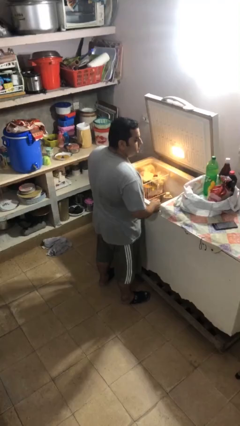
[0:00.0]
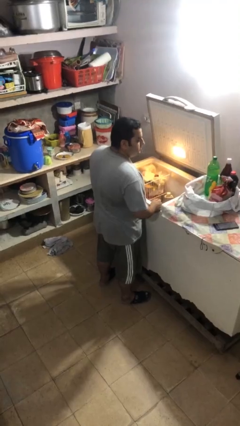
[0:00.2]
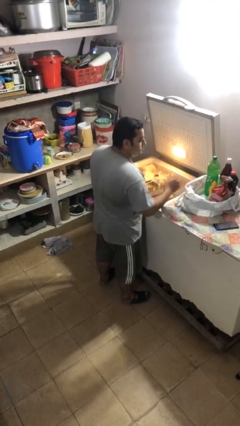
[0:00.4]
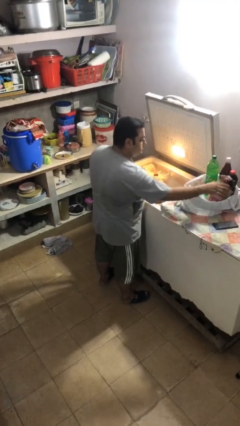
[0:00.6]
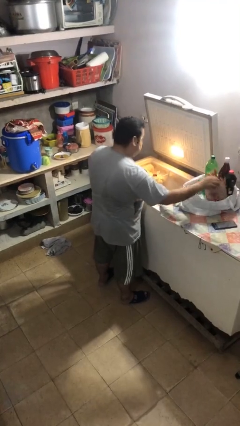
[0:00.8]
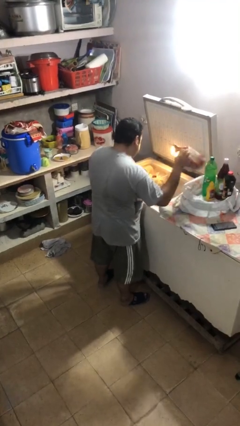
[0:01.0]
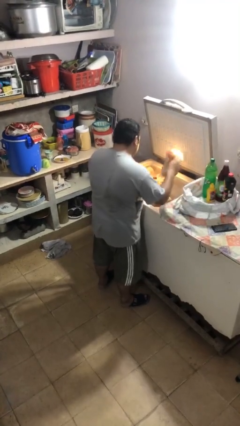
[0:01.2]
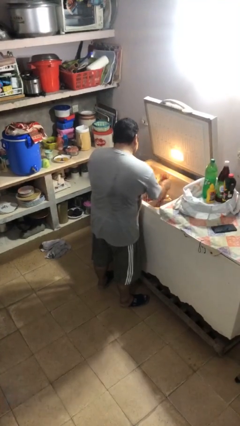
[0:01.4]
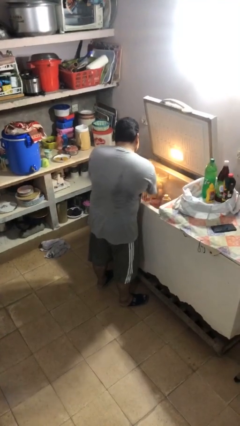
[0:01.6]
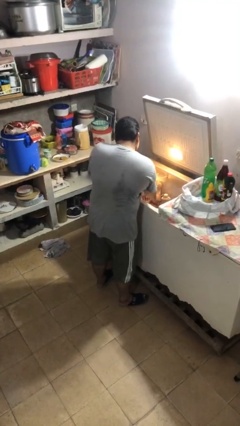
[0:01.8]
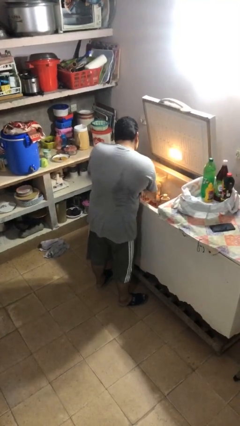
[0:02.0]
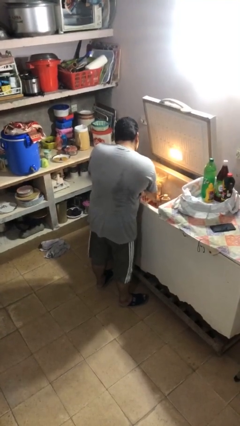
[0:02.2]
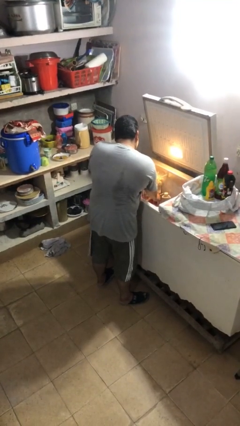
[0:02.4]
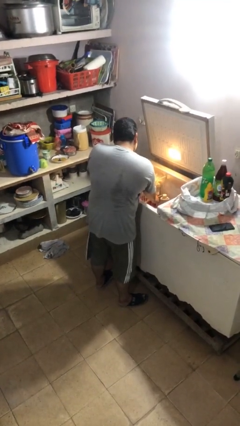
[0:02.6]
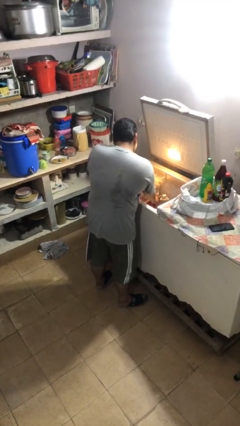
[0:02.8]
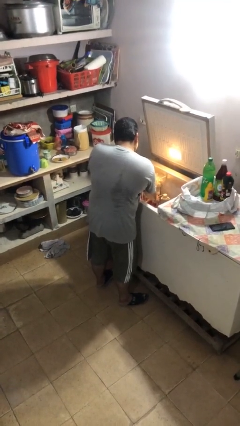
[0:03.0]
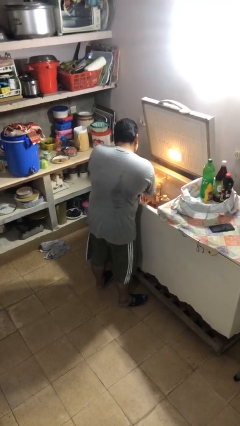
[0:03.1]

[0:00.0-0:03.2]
person loads groceries into refrigerator

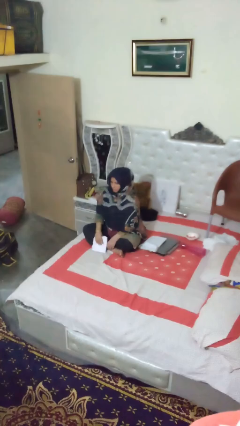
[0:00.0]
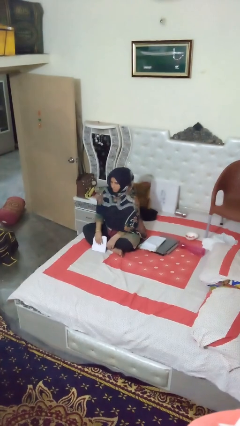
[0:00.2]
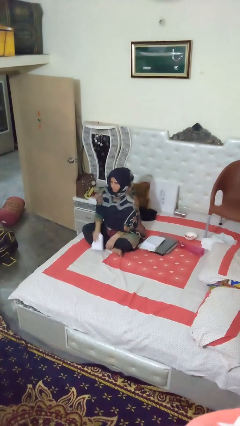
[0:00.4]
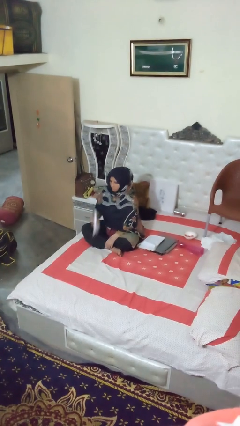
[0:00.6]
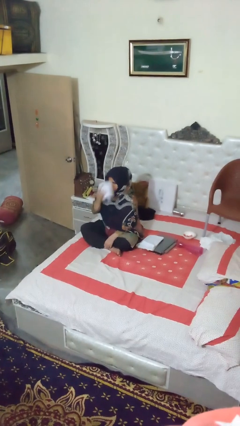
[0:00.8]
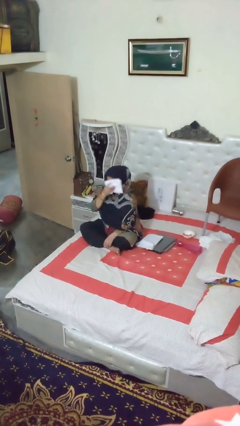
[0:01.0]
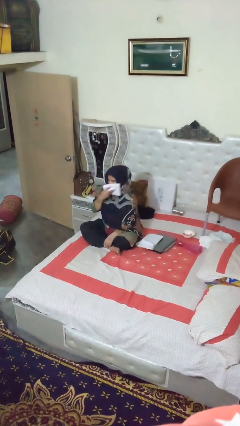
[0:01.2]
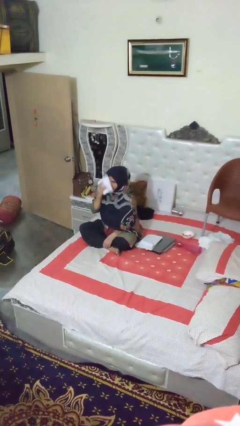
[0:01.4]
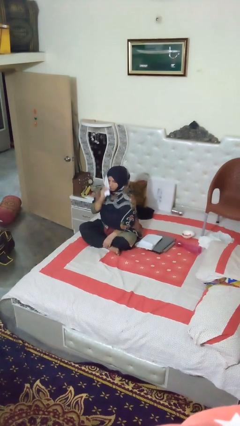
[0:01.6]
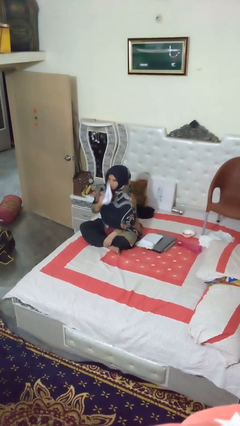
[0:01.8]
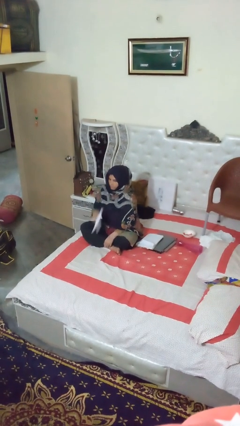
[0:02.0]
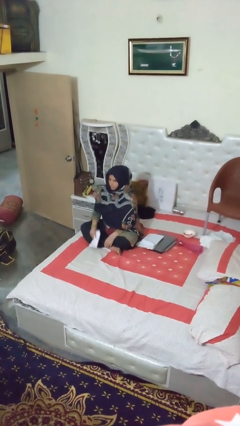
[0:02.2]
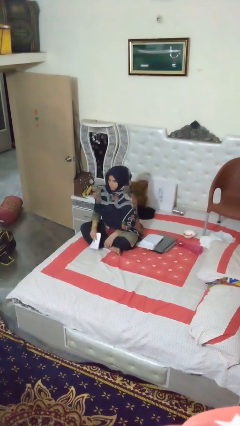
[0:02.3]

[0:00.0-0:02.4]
person wipes mouth with napkin

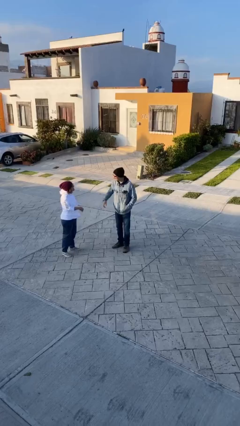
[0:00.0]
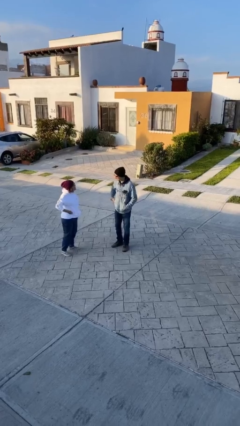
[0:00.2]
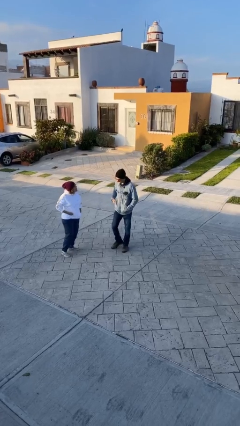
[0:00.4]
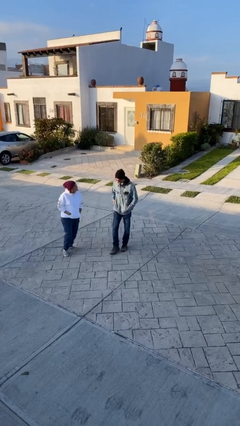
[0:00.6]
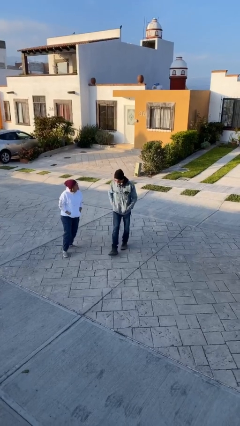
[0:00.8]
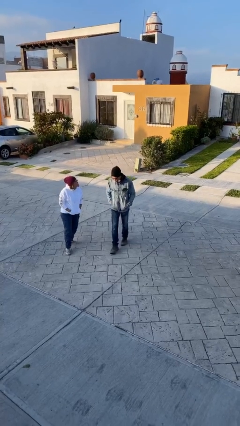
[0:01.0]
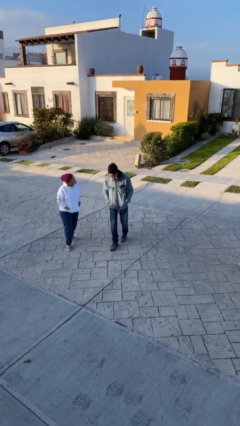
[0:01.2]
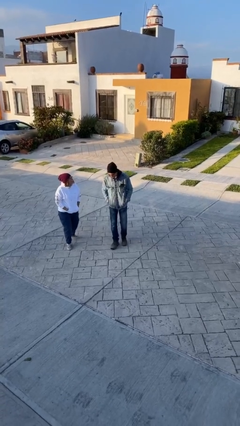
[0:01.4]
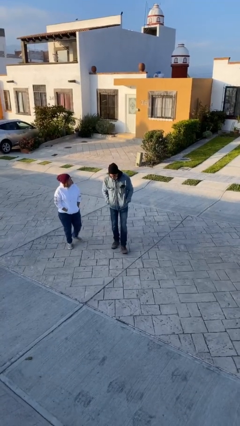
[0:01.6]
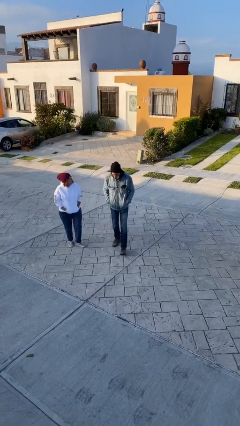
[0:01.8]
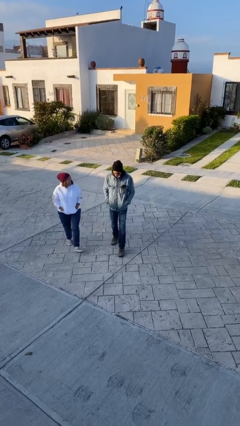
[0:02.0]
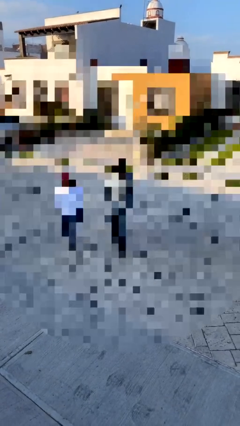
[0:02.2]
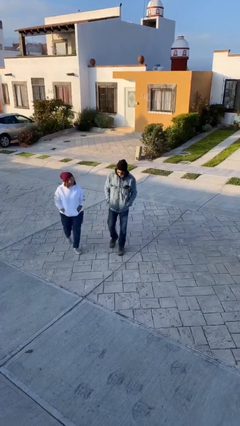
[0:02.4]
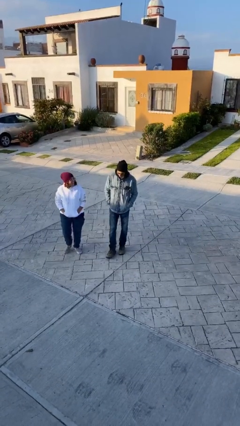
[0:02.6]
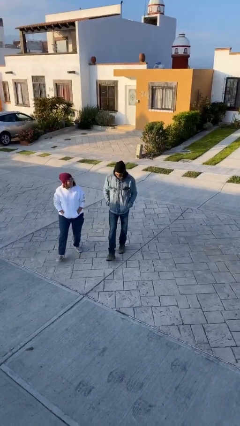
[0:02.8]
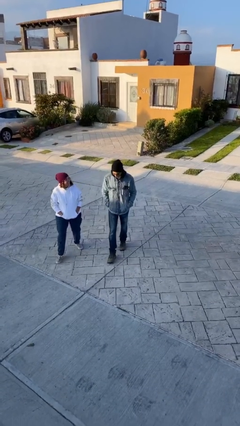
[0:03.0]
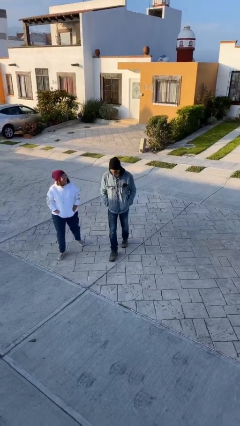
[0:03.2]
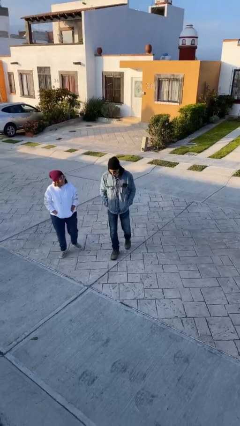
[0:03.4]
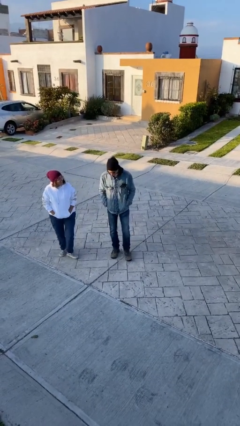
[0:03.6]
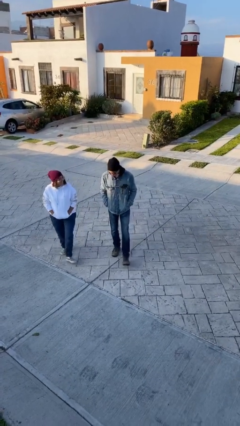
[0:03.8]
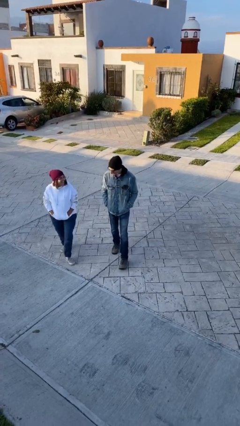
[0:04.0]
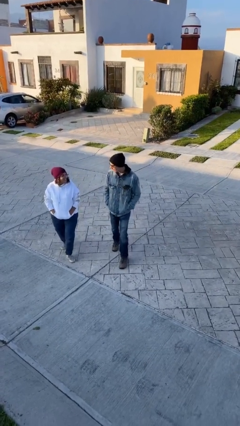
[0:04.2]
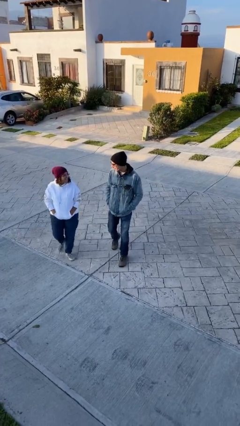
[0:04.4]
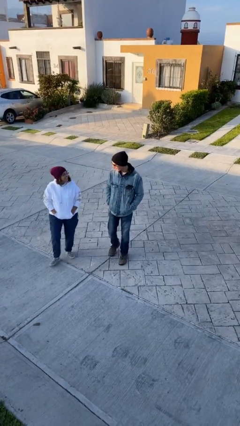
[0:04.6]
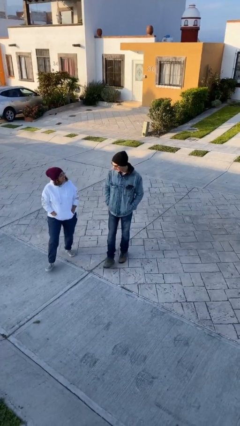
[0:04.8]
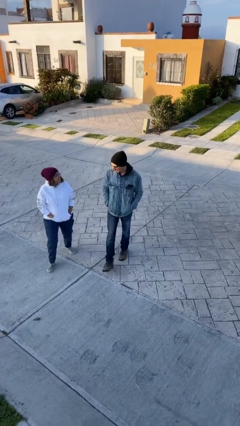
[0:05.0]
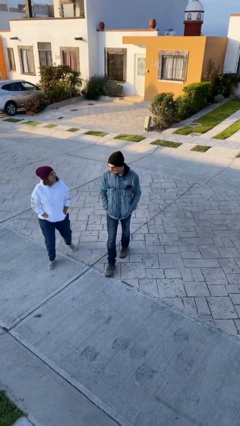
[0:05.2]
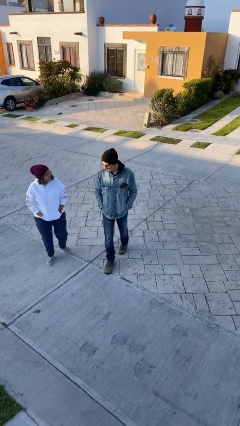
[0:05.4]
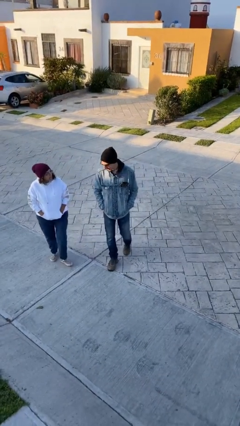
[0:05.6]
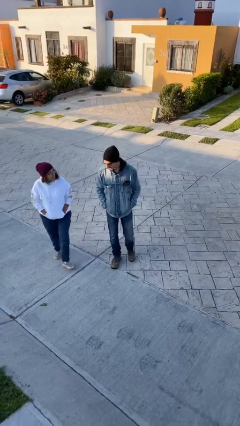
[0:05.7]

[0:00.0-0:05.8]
person talks to person

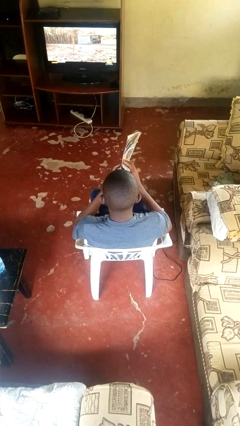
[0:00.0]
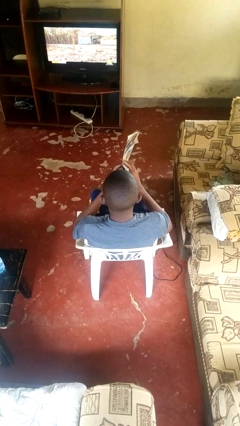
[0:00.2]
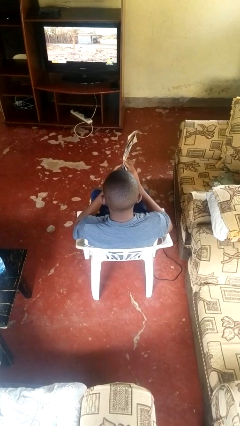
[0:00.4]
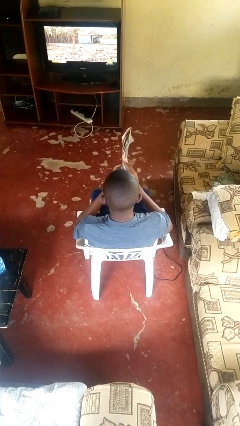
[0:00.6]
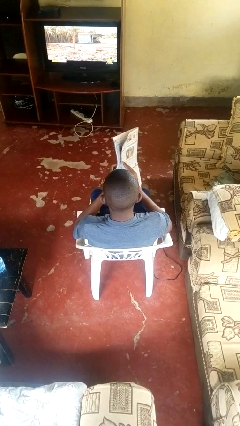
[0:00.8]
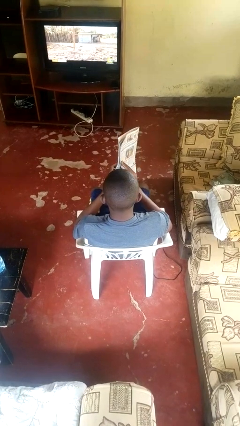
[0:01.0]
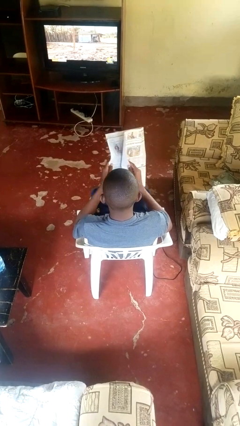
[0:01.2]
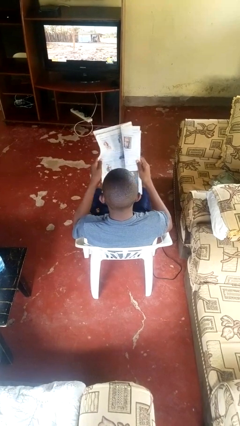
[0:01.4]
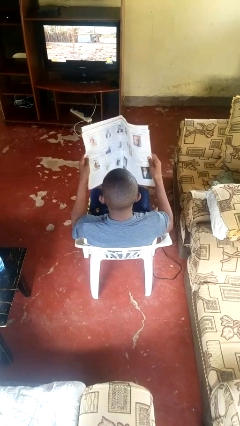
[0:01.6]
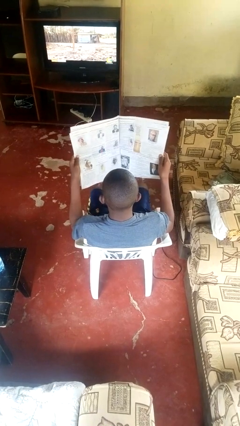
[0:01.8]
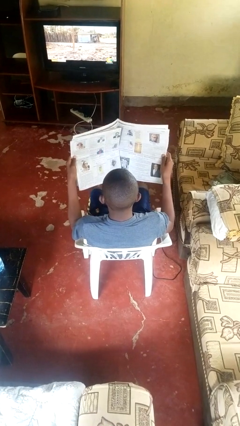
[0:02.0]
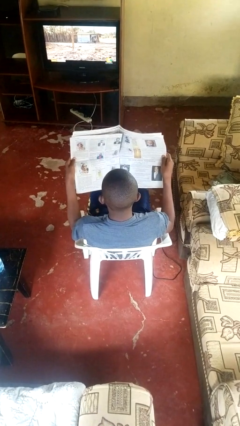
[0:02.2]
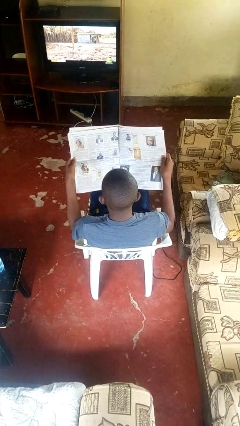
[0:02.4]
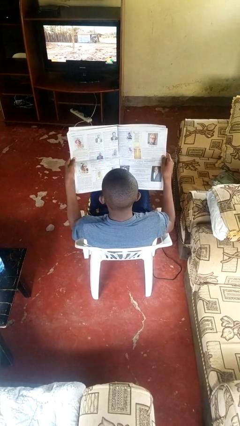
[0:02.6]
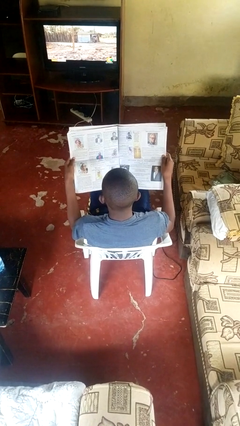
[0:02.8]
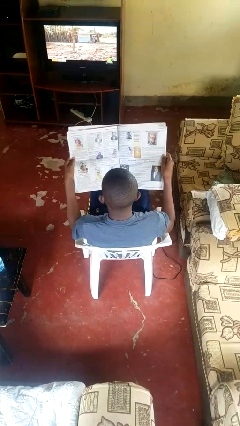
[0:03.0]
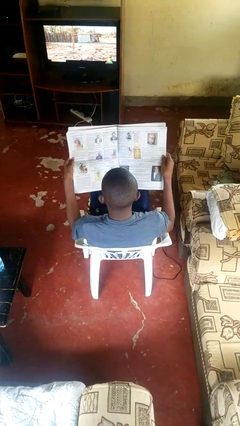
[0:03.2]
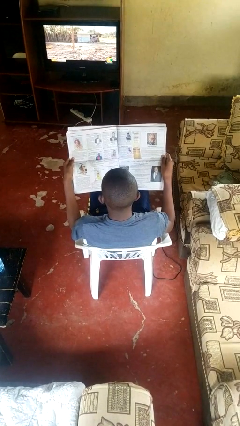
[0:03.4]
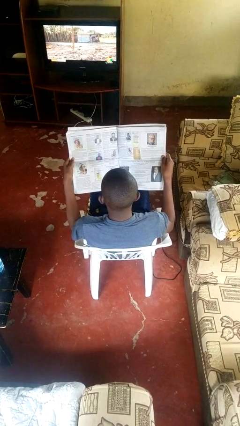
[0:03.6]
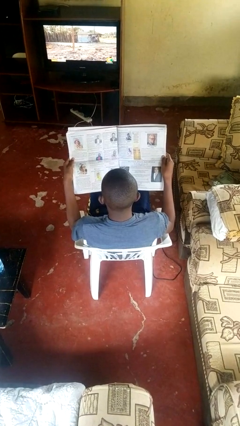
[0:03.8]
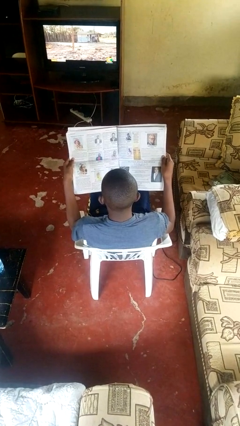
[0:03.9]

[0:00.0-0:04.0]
person reads newspaper

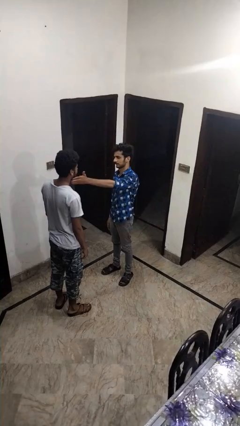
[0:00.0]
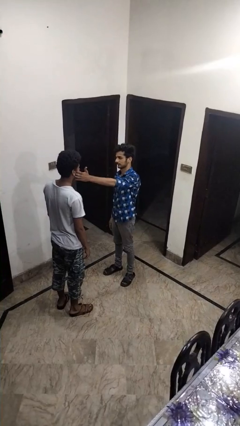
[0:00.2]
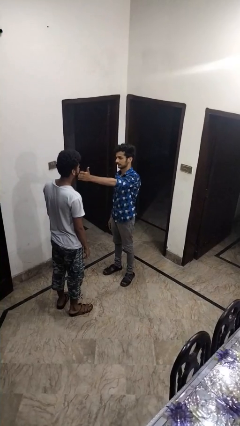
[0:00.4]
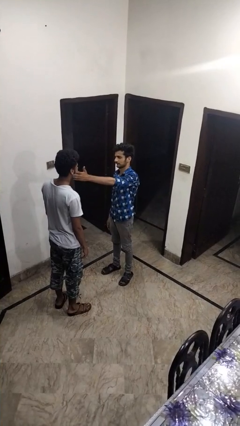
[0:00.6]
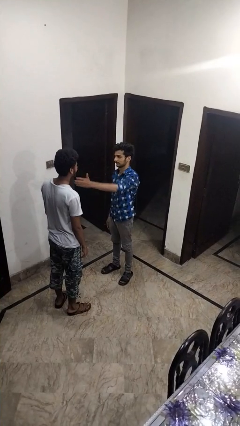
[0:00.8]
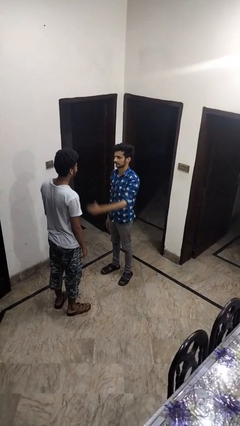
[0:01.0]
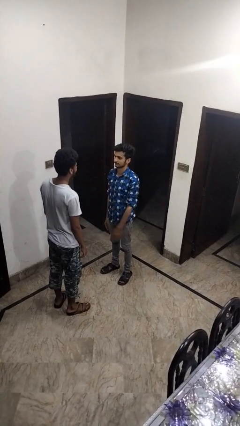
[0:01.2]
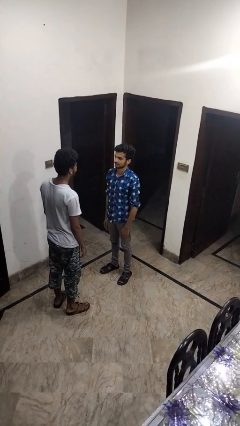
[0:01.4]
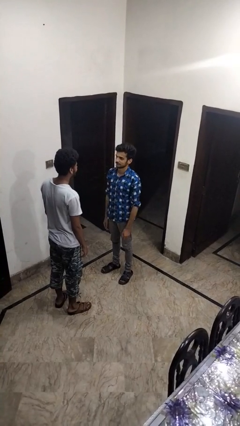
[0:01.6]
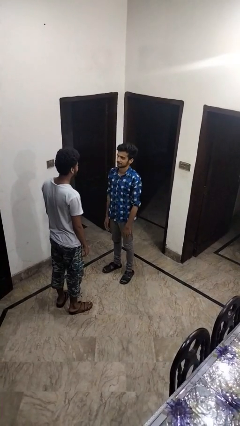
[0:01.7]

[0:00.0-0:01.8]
person touches face of person

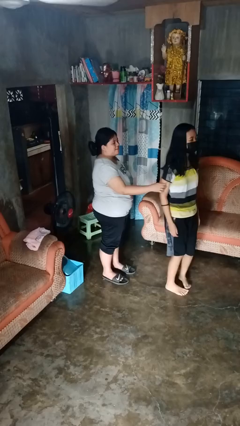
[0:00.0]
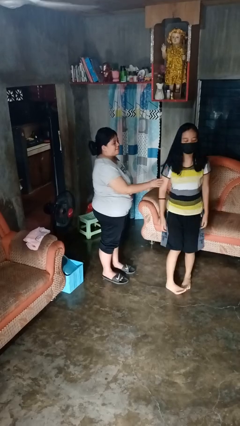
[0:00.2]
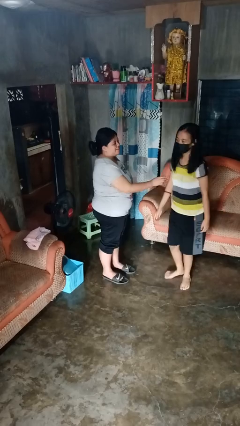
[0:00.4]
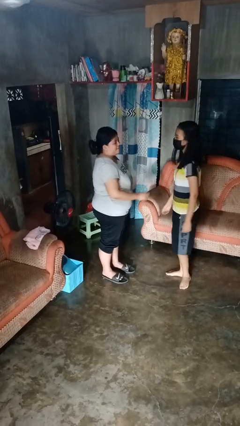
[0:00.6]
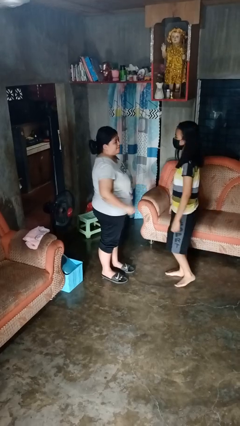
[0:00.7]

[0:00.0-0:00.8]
person spins person around
